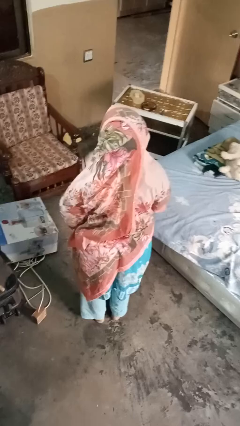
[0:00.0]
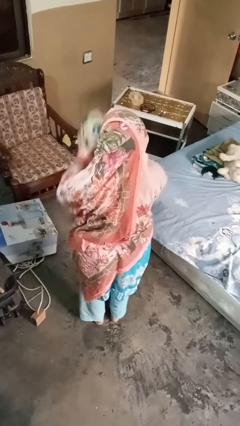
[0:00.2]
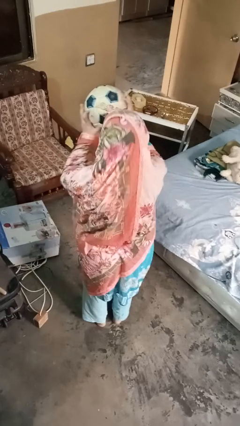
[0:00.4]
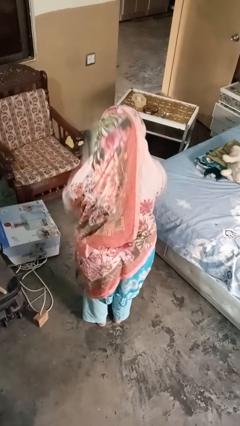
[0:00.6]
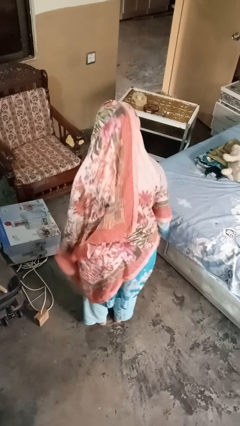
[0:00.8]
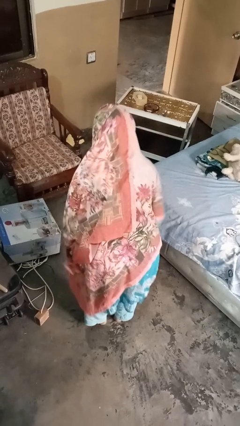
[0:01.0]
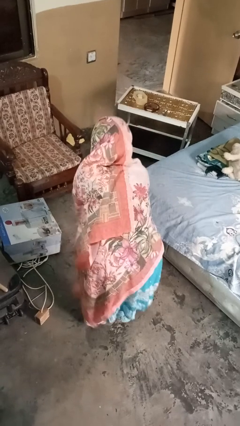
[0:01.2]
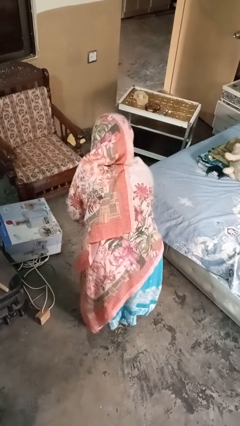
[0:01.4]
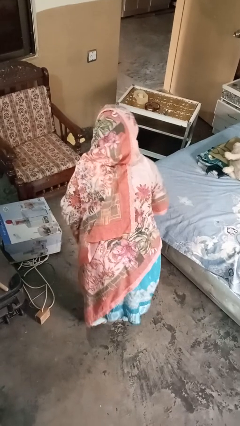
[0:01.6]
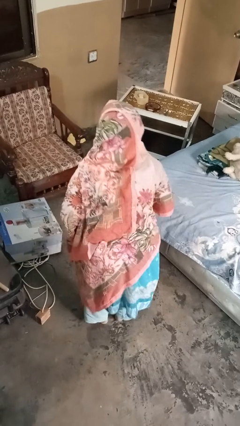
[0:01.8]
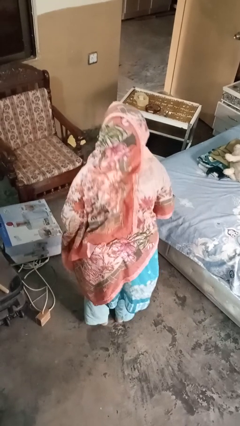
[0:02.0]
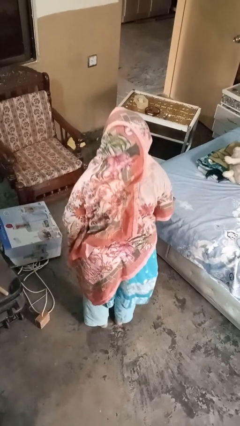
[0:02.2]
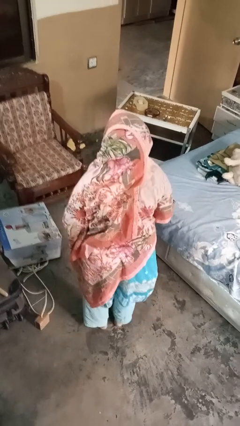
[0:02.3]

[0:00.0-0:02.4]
person bounces ball on floor

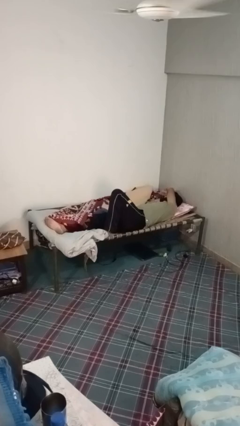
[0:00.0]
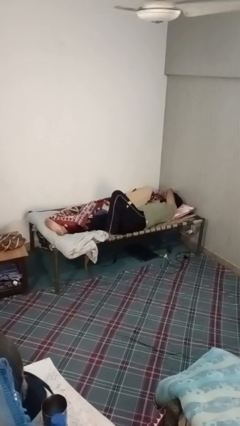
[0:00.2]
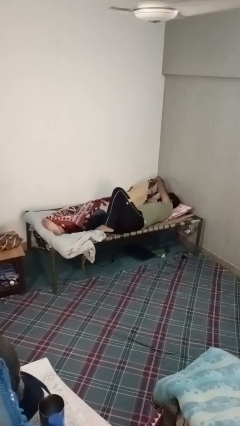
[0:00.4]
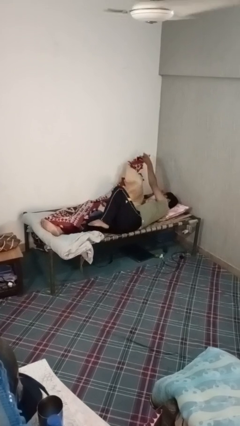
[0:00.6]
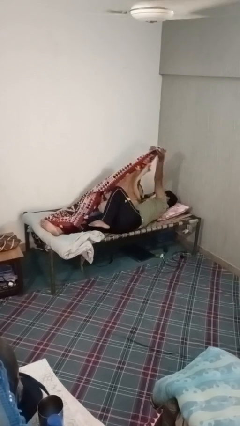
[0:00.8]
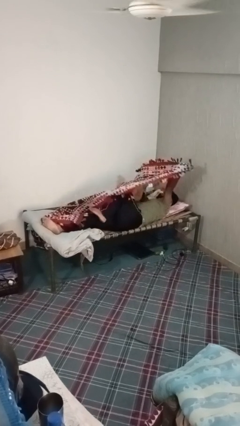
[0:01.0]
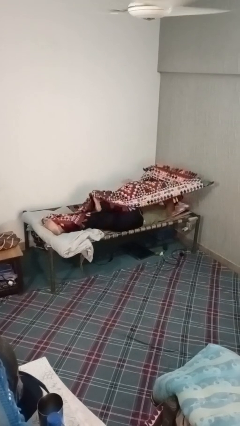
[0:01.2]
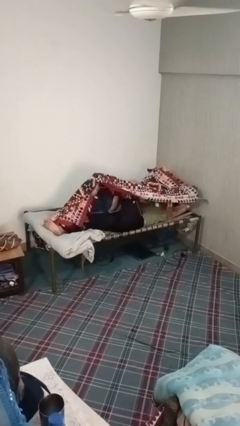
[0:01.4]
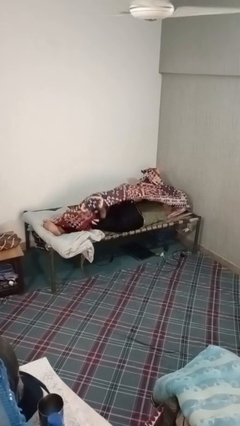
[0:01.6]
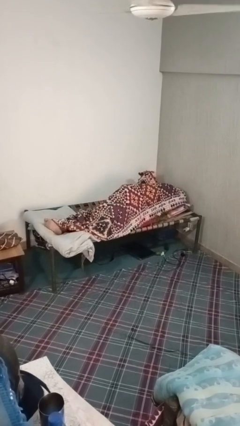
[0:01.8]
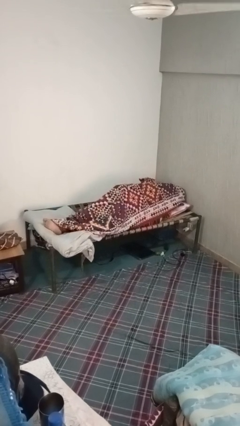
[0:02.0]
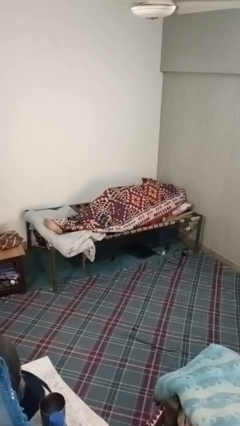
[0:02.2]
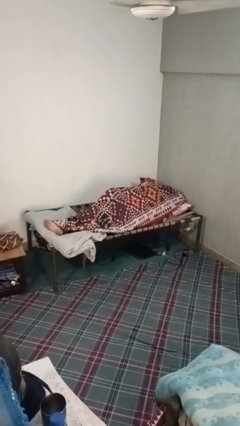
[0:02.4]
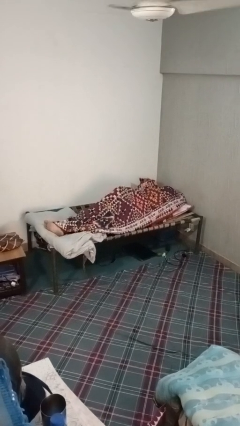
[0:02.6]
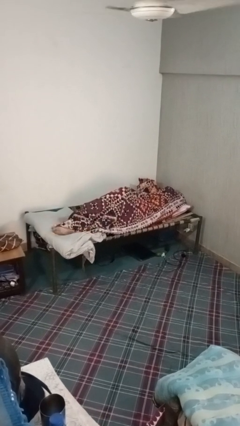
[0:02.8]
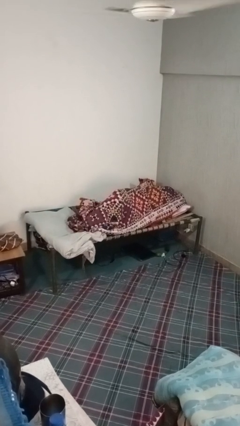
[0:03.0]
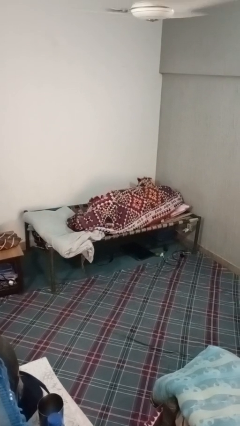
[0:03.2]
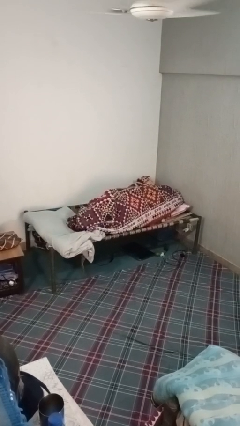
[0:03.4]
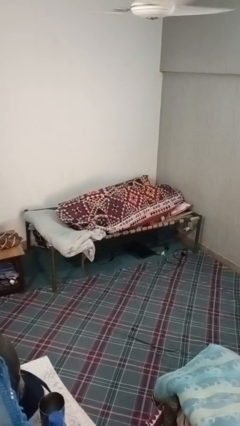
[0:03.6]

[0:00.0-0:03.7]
person covers with blanket

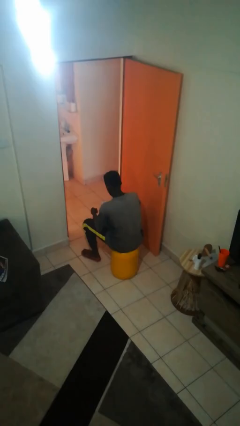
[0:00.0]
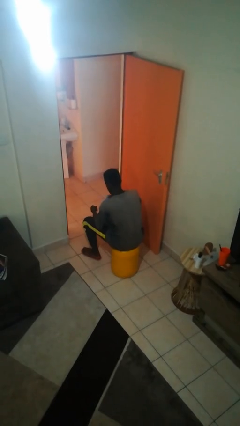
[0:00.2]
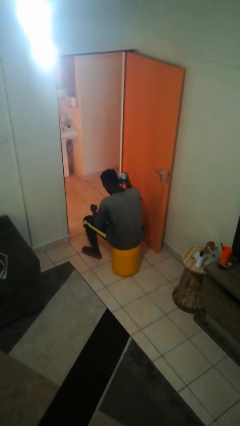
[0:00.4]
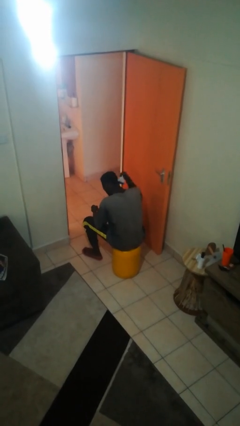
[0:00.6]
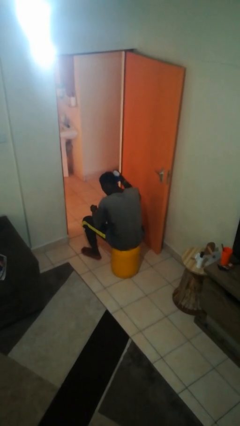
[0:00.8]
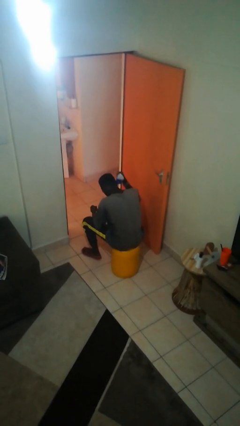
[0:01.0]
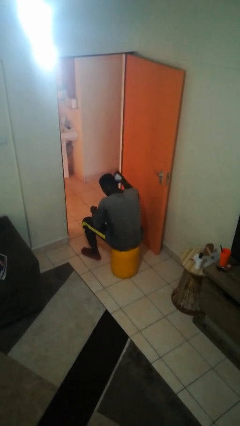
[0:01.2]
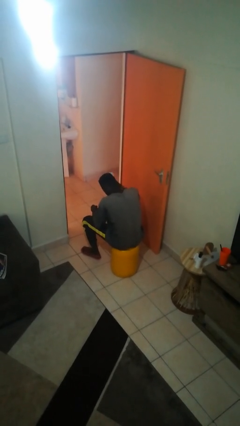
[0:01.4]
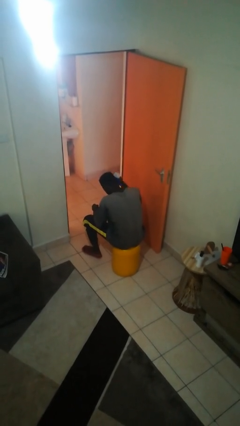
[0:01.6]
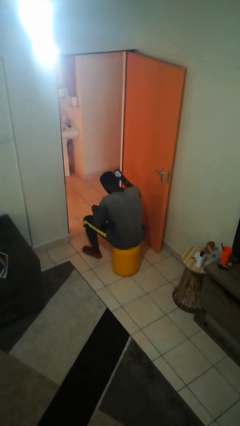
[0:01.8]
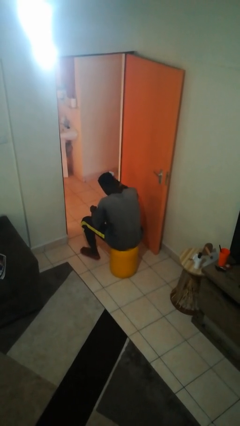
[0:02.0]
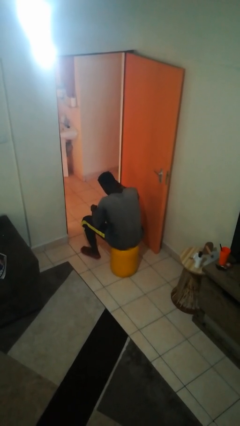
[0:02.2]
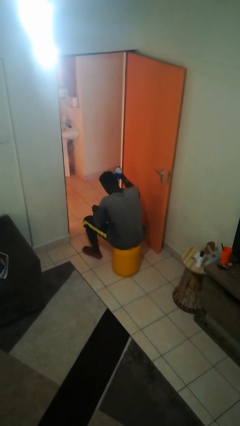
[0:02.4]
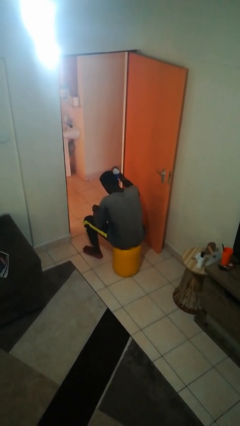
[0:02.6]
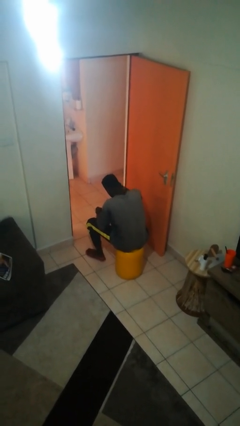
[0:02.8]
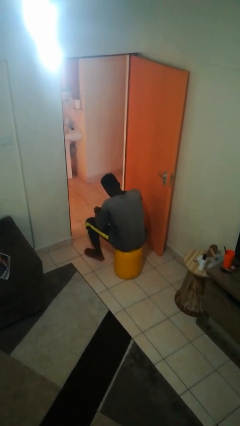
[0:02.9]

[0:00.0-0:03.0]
person brushes hair

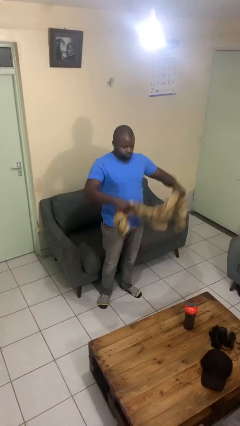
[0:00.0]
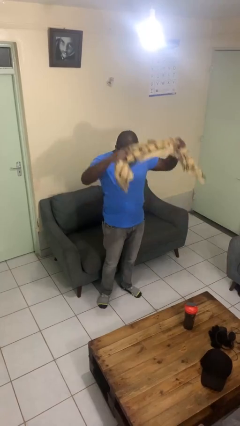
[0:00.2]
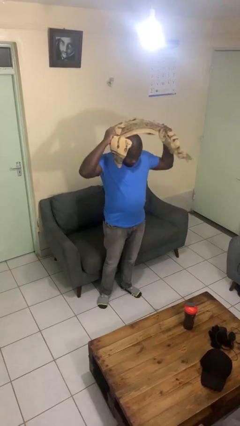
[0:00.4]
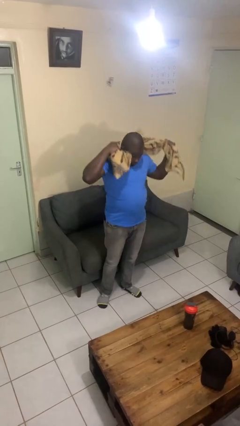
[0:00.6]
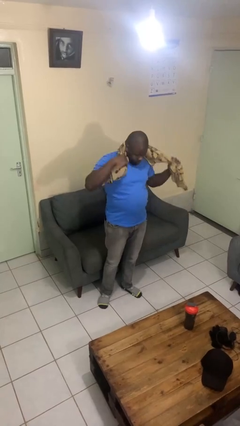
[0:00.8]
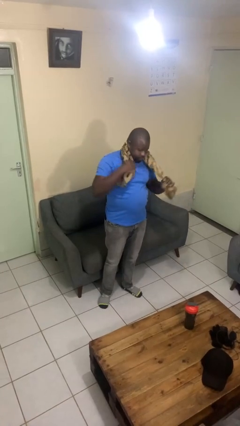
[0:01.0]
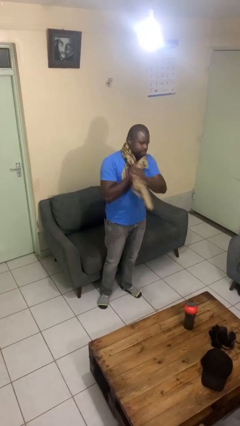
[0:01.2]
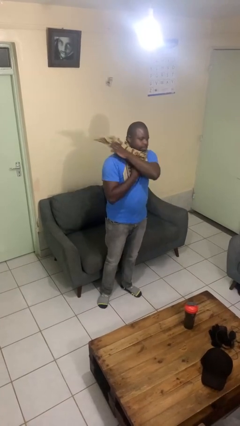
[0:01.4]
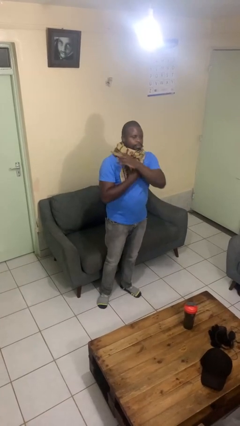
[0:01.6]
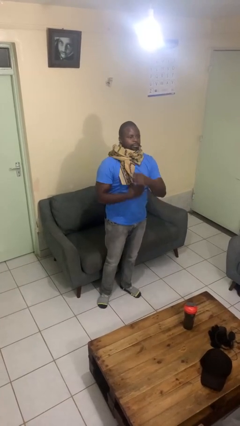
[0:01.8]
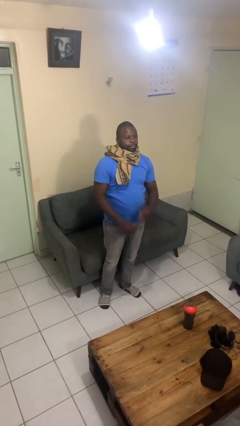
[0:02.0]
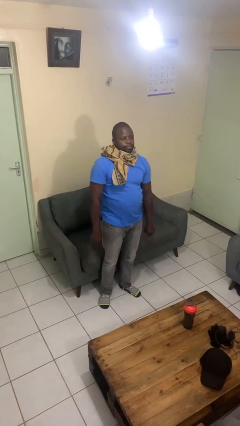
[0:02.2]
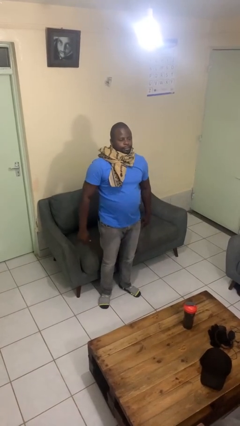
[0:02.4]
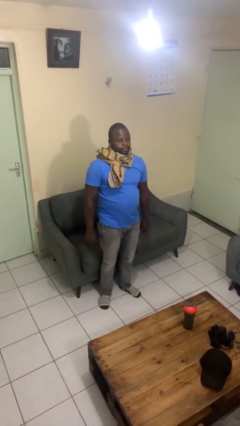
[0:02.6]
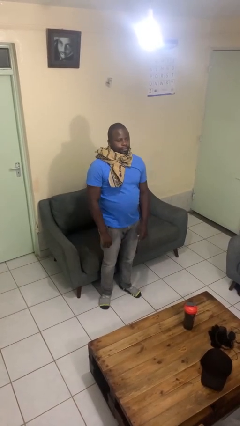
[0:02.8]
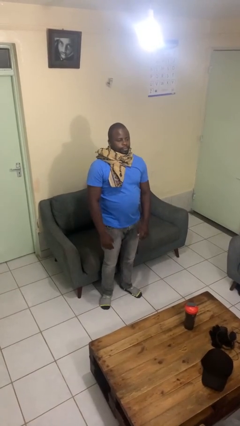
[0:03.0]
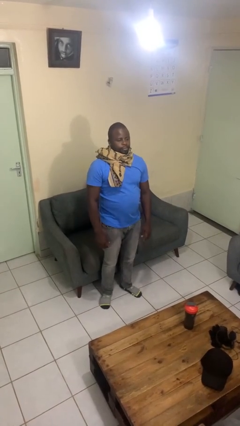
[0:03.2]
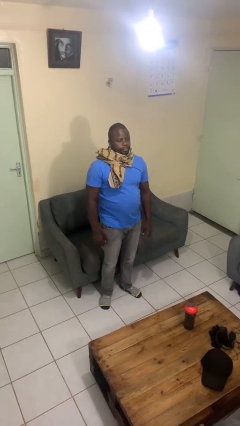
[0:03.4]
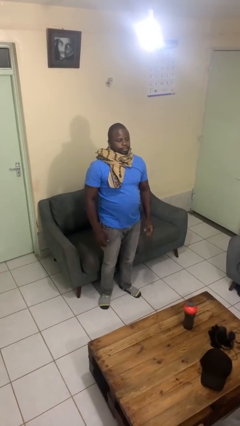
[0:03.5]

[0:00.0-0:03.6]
person puts on scarf

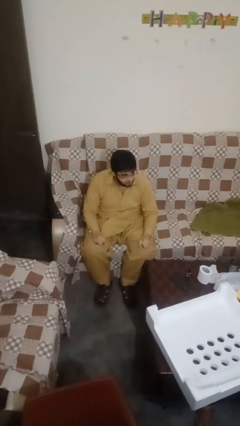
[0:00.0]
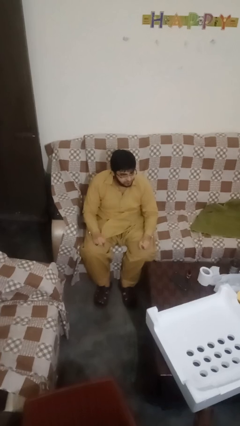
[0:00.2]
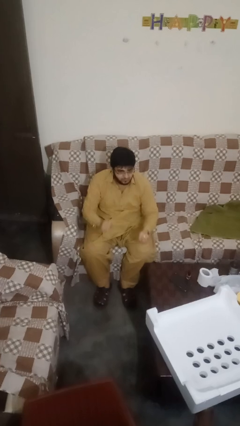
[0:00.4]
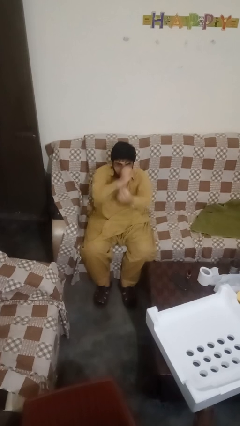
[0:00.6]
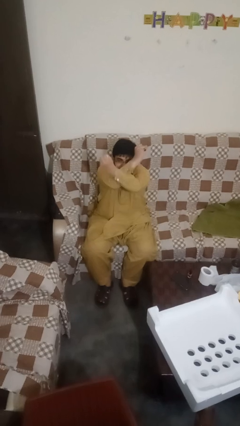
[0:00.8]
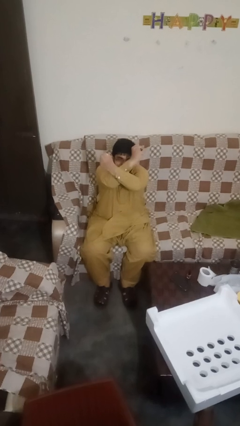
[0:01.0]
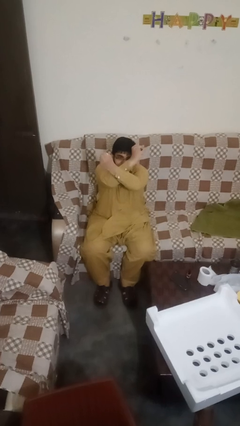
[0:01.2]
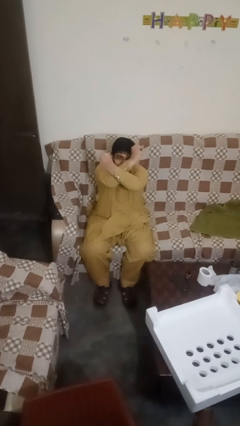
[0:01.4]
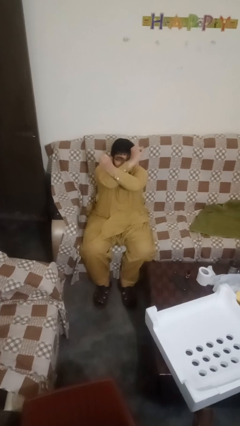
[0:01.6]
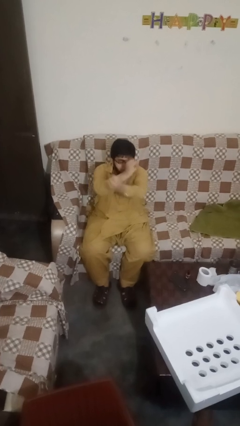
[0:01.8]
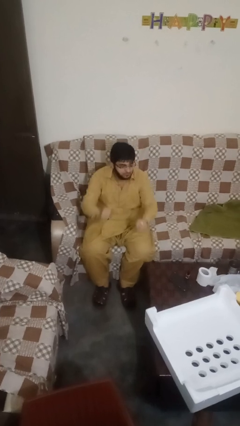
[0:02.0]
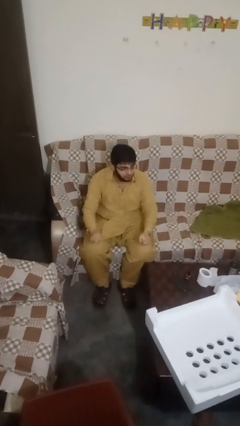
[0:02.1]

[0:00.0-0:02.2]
person gestures arms x

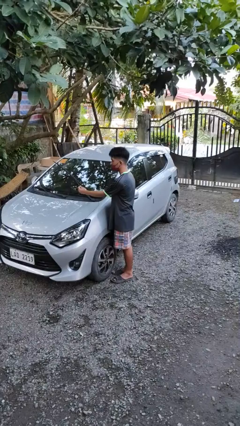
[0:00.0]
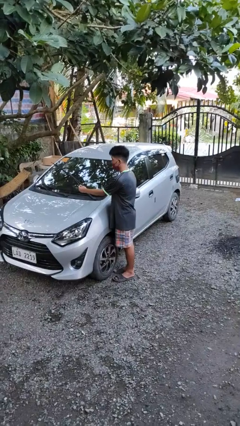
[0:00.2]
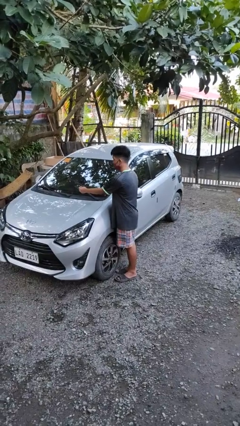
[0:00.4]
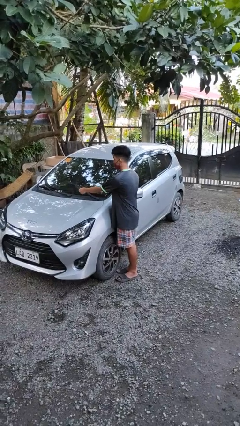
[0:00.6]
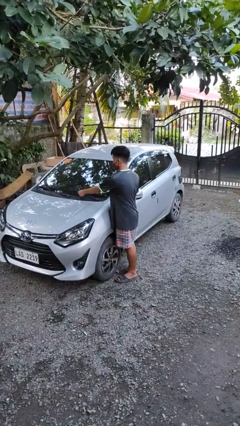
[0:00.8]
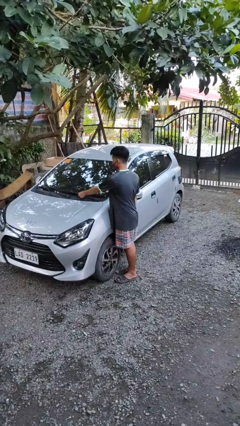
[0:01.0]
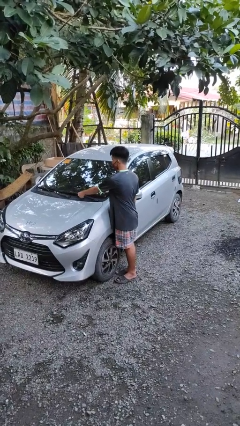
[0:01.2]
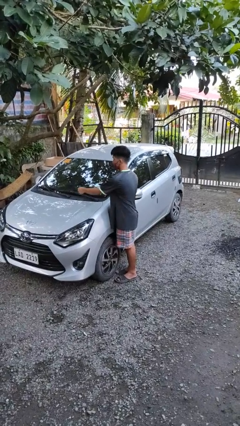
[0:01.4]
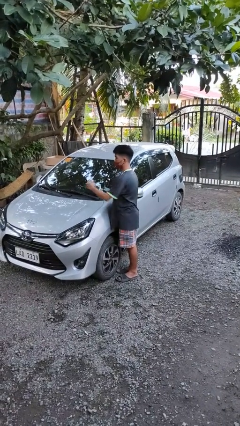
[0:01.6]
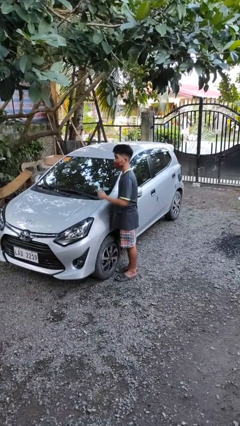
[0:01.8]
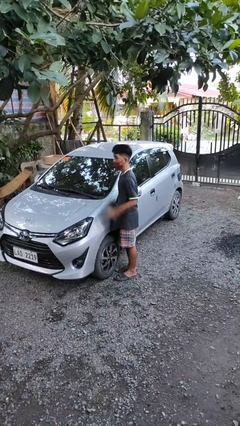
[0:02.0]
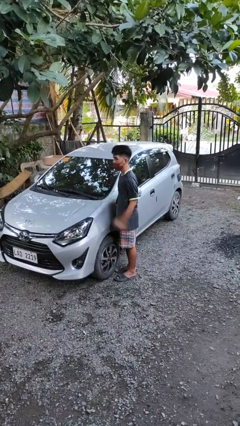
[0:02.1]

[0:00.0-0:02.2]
person flips down car wipers

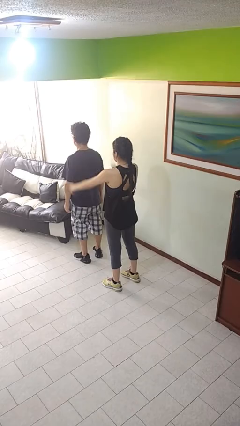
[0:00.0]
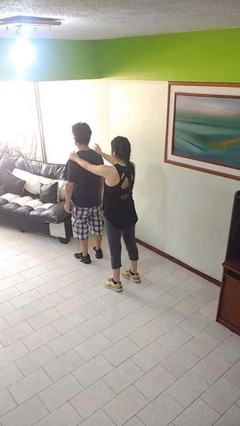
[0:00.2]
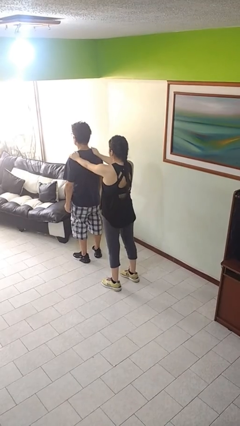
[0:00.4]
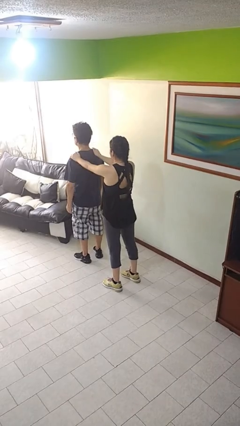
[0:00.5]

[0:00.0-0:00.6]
person grabs person by shoulder
